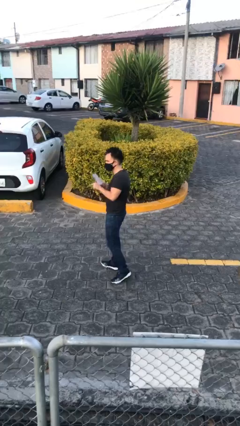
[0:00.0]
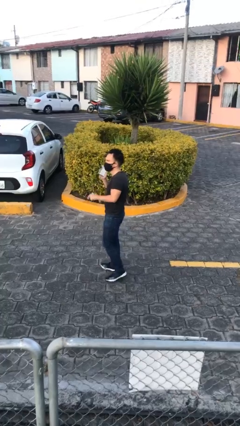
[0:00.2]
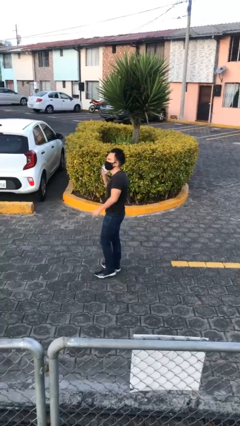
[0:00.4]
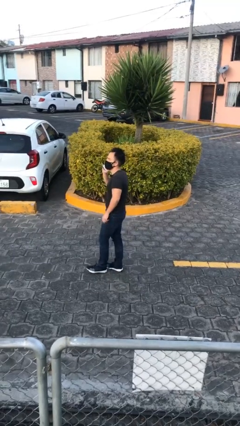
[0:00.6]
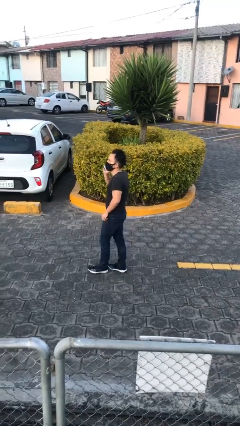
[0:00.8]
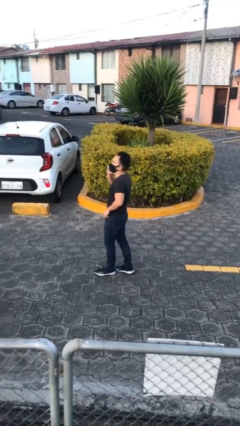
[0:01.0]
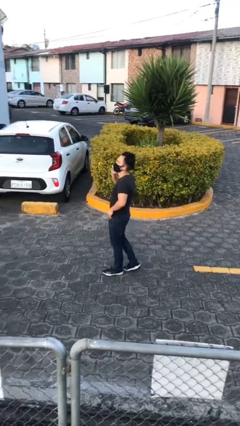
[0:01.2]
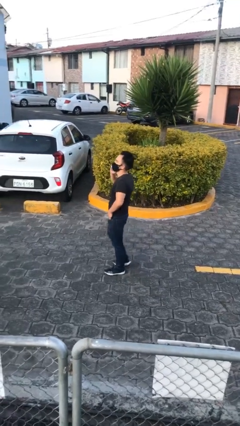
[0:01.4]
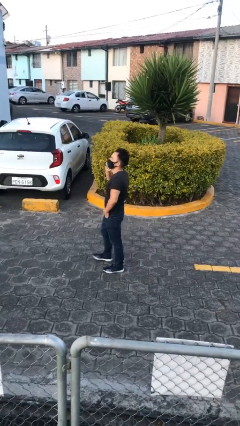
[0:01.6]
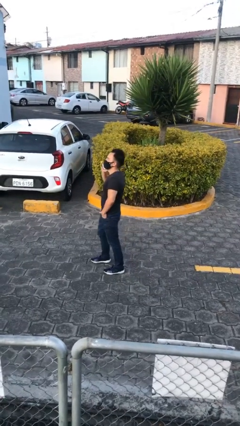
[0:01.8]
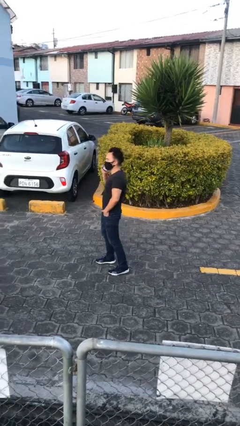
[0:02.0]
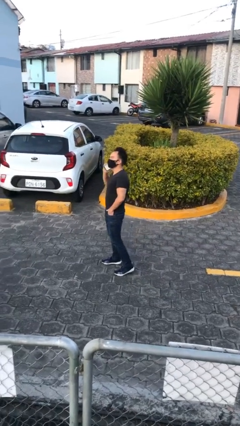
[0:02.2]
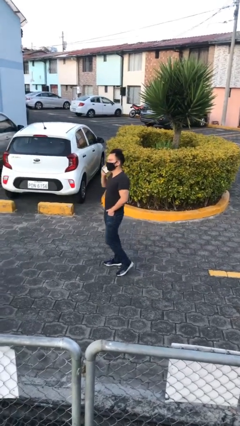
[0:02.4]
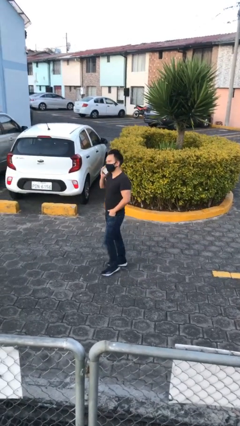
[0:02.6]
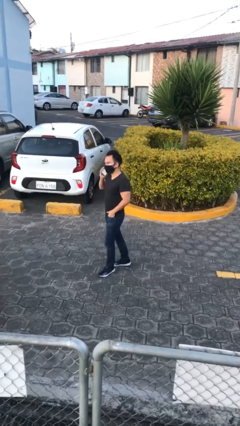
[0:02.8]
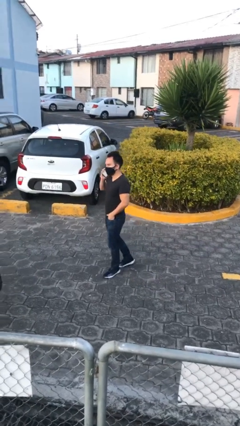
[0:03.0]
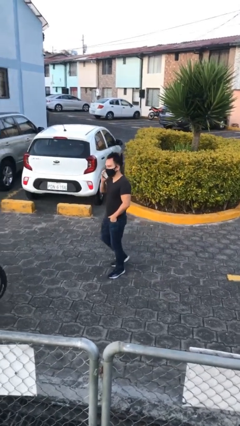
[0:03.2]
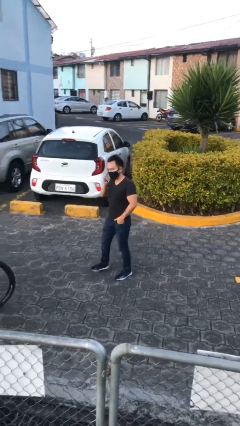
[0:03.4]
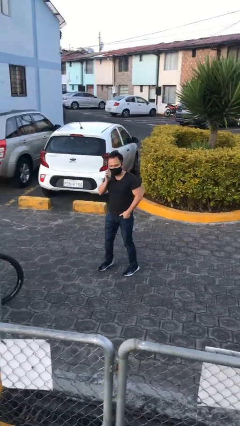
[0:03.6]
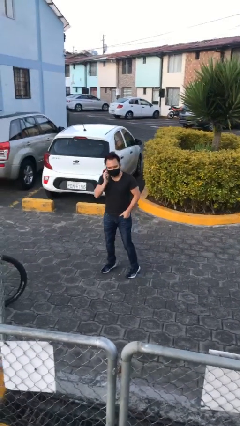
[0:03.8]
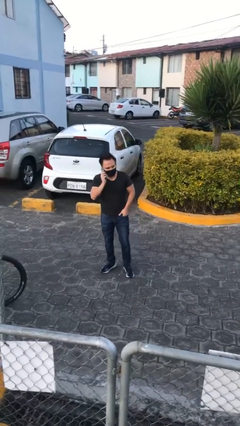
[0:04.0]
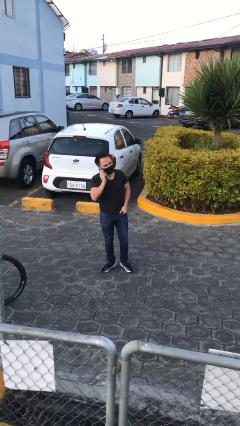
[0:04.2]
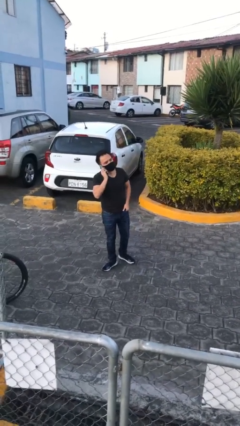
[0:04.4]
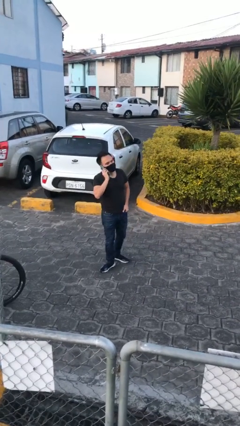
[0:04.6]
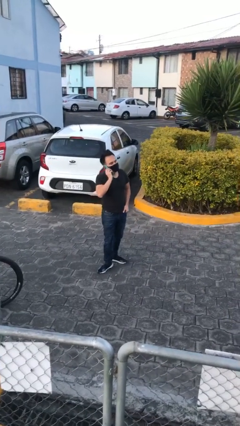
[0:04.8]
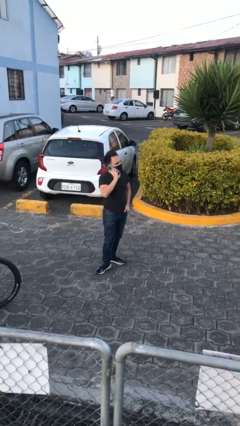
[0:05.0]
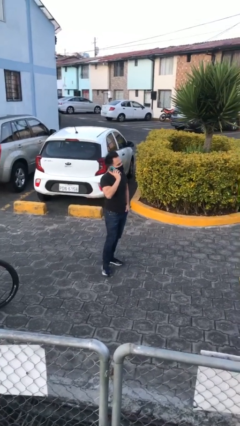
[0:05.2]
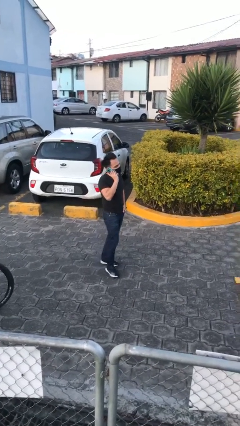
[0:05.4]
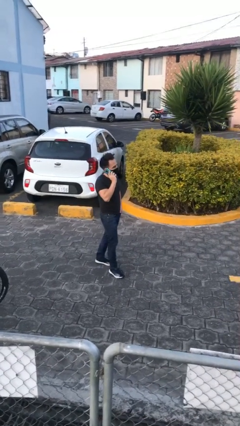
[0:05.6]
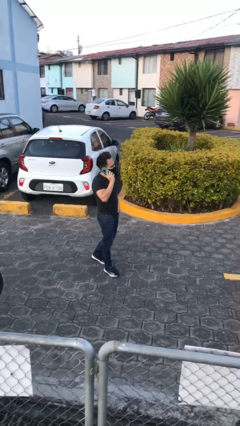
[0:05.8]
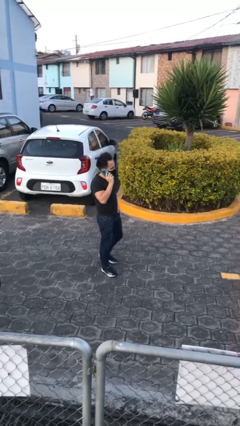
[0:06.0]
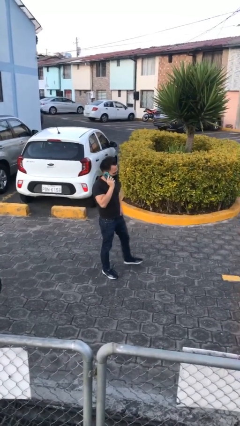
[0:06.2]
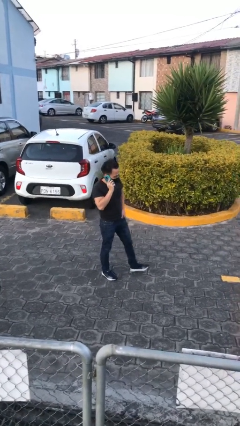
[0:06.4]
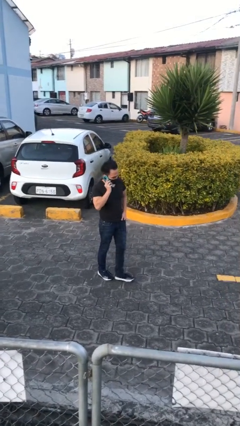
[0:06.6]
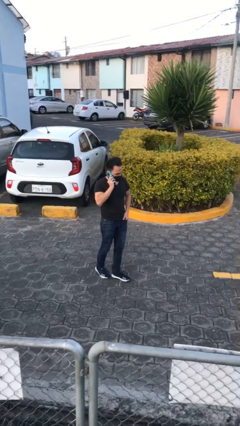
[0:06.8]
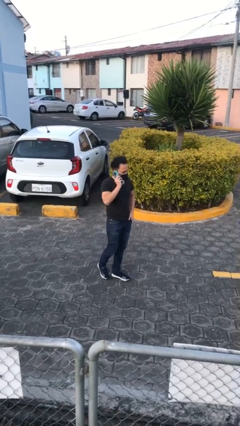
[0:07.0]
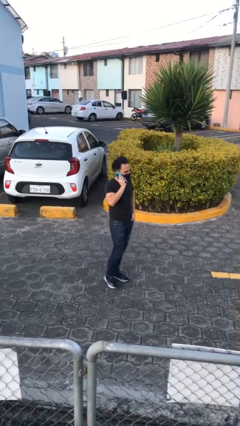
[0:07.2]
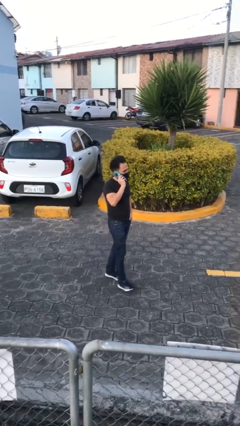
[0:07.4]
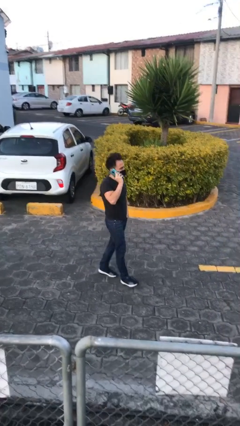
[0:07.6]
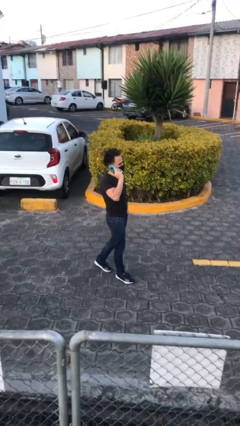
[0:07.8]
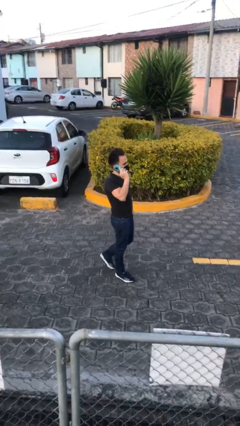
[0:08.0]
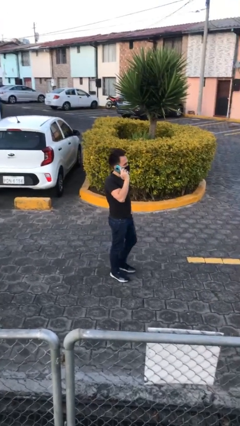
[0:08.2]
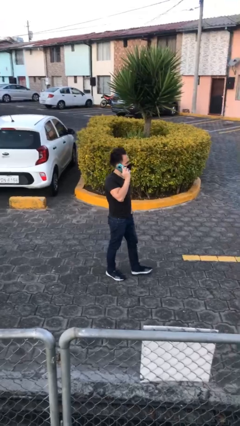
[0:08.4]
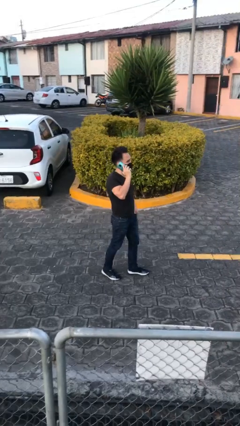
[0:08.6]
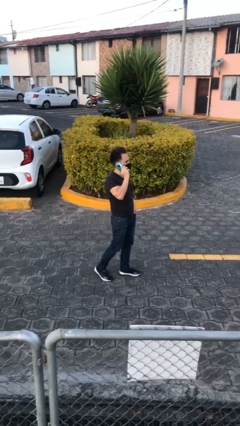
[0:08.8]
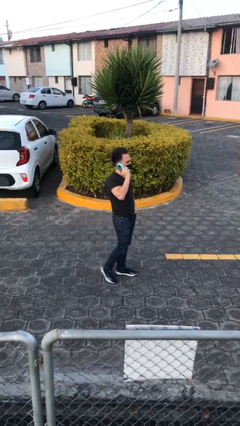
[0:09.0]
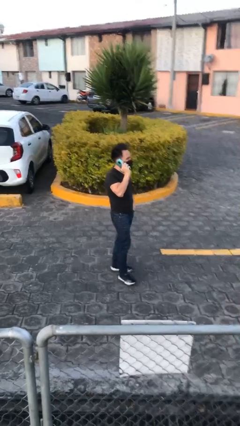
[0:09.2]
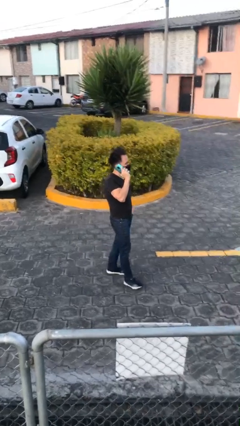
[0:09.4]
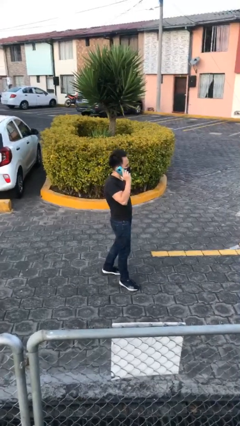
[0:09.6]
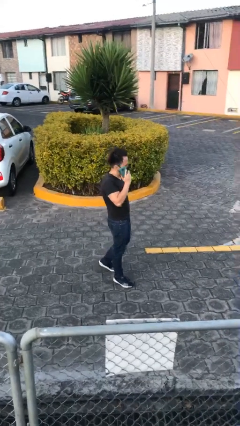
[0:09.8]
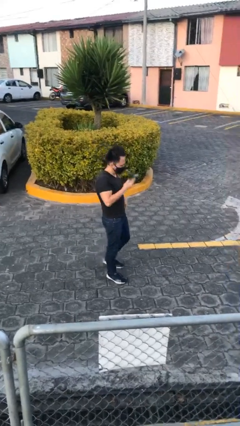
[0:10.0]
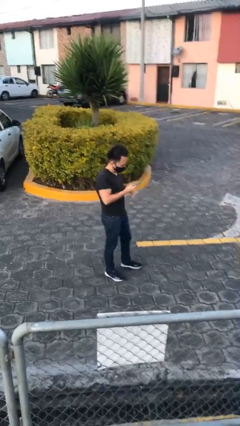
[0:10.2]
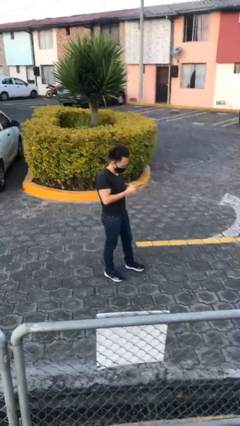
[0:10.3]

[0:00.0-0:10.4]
person talks on phone

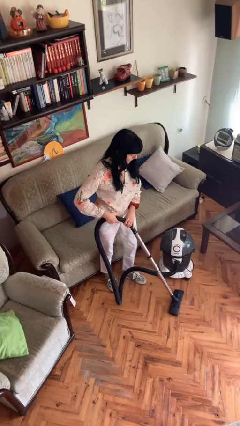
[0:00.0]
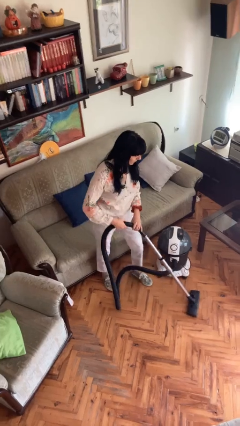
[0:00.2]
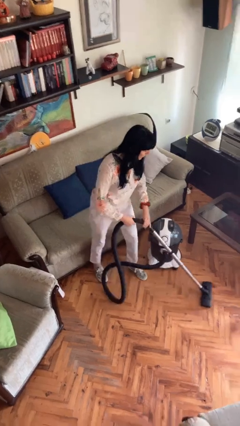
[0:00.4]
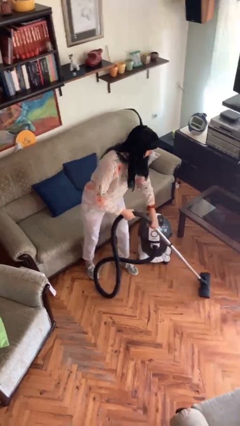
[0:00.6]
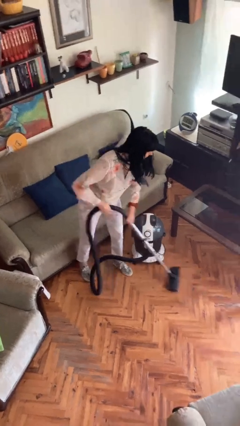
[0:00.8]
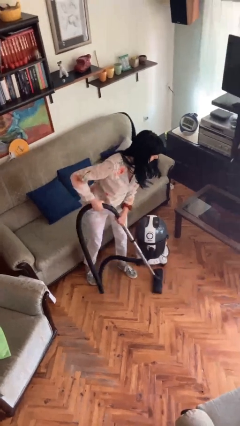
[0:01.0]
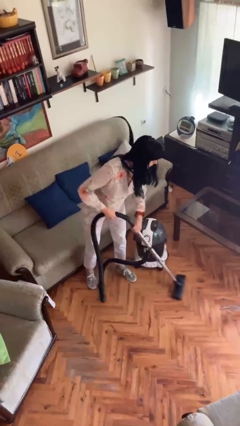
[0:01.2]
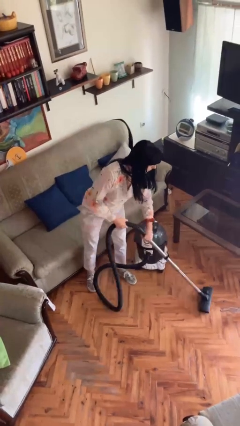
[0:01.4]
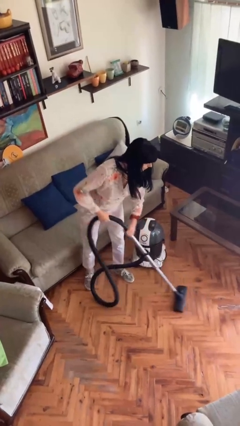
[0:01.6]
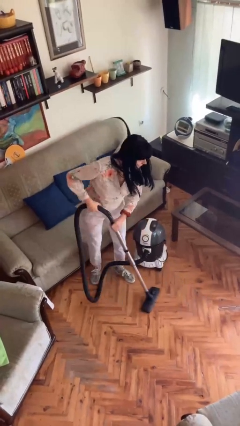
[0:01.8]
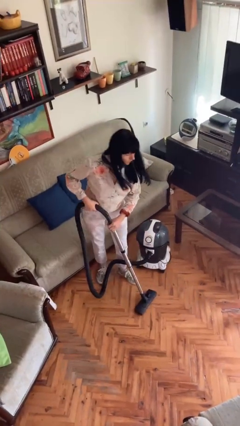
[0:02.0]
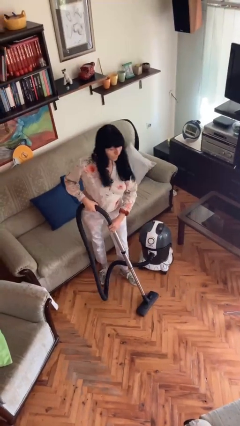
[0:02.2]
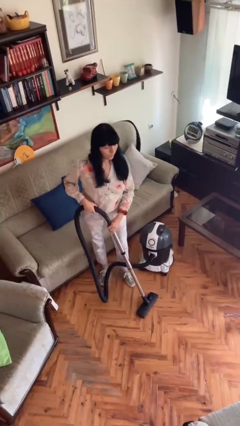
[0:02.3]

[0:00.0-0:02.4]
person vacuums carpet

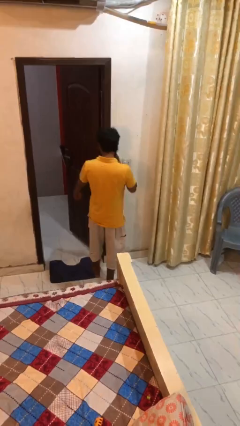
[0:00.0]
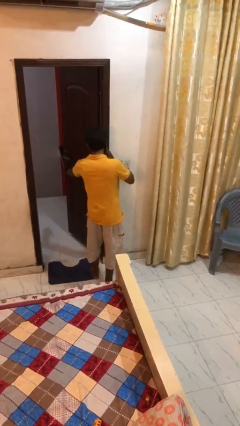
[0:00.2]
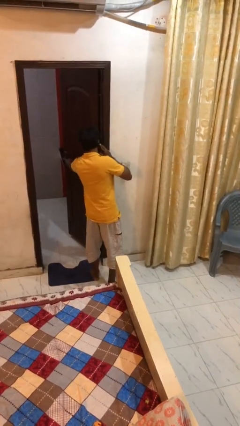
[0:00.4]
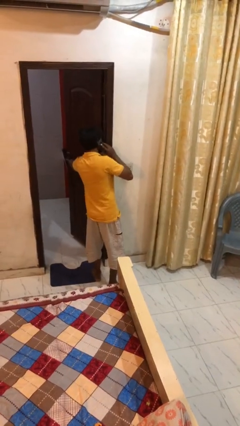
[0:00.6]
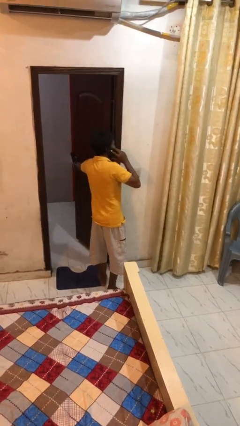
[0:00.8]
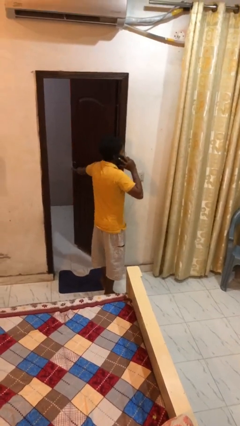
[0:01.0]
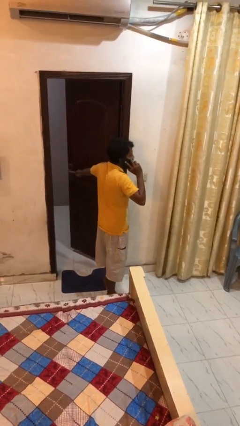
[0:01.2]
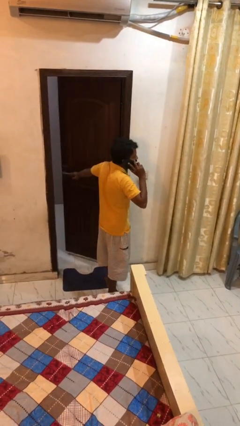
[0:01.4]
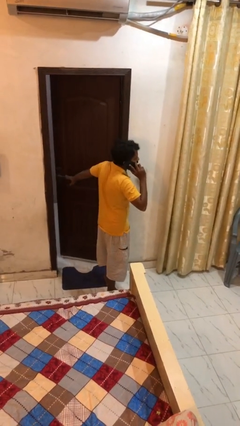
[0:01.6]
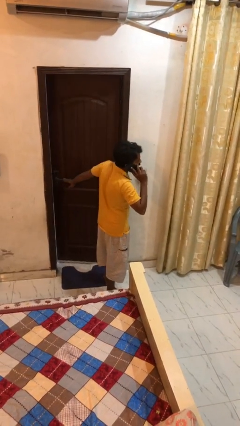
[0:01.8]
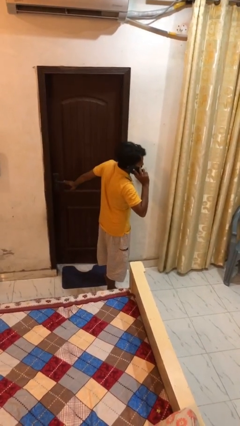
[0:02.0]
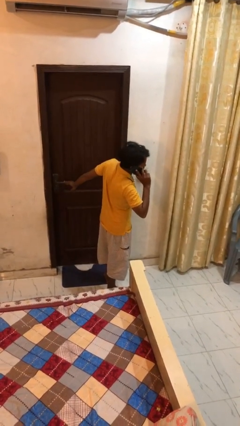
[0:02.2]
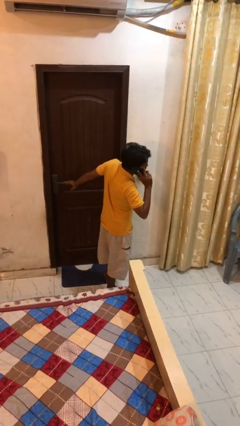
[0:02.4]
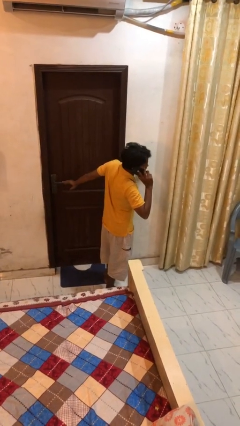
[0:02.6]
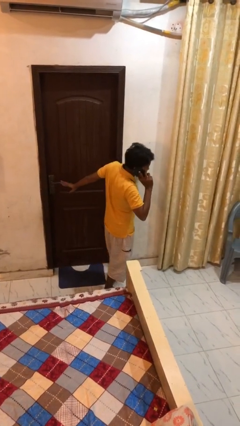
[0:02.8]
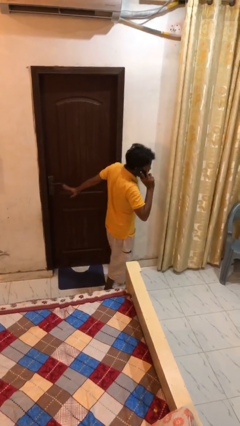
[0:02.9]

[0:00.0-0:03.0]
person closes facility door

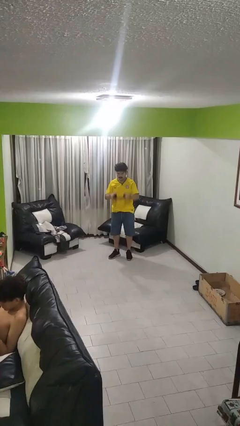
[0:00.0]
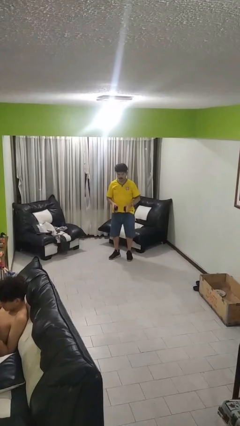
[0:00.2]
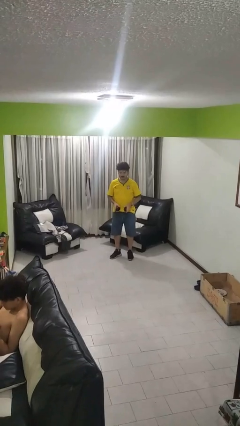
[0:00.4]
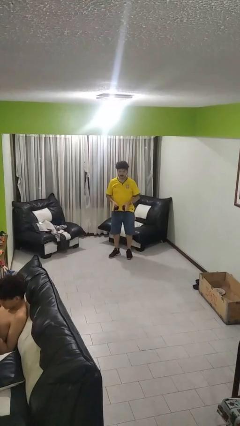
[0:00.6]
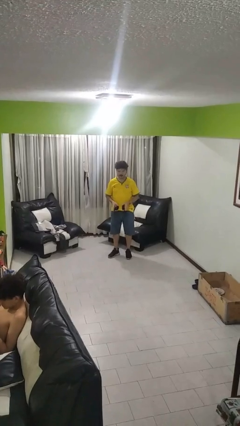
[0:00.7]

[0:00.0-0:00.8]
person takes off headphones

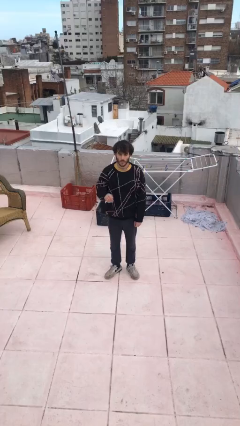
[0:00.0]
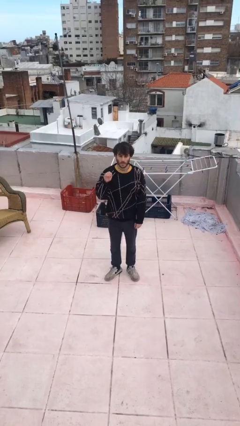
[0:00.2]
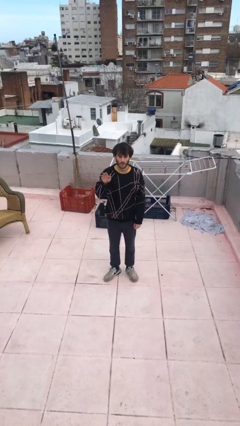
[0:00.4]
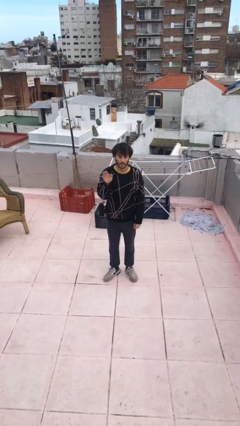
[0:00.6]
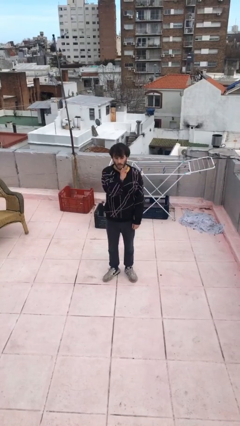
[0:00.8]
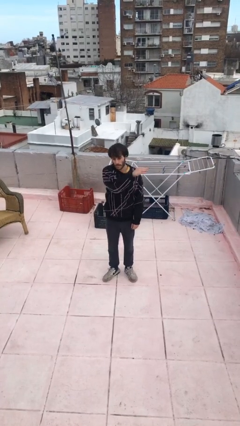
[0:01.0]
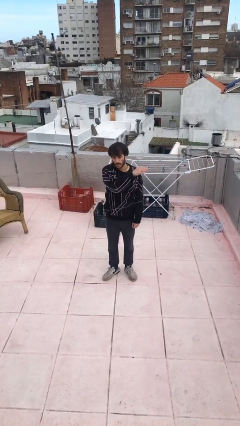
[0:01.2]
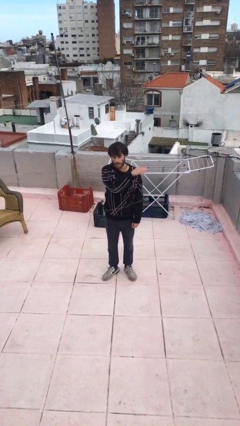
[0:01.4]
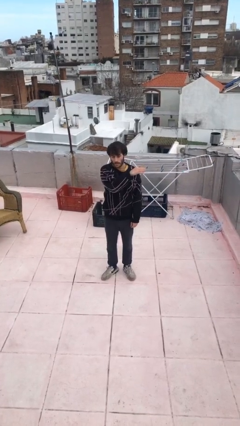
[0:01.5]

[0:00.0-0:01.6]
person gestures swipe left
